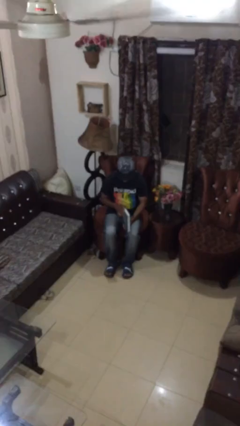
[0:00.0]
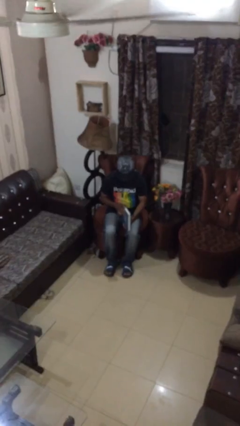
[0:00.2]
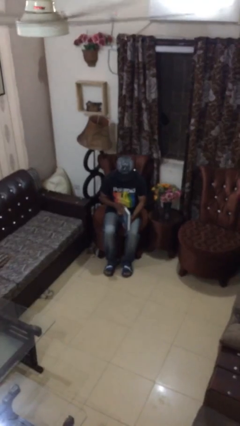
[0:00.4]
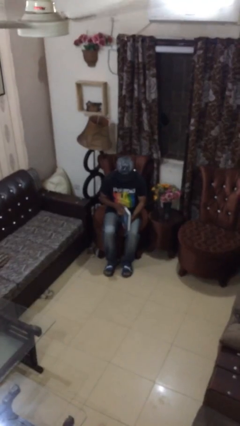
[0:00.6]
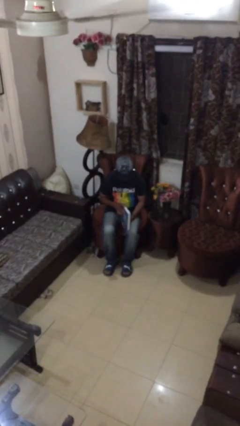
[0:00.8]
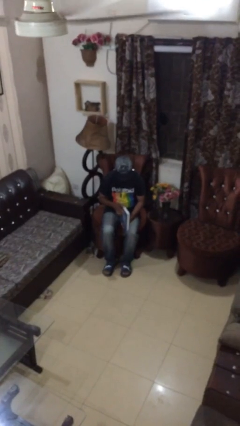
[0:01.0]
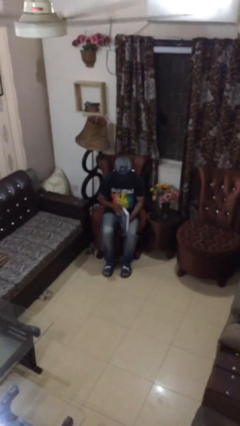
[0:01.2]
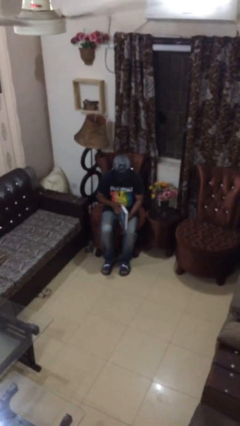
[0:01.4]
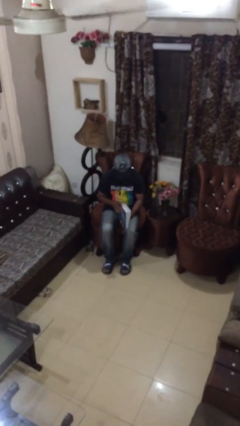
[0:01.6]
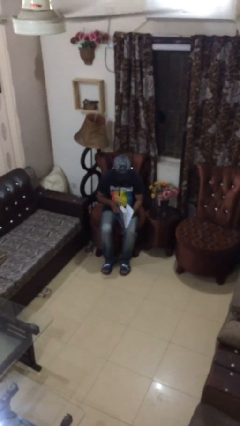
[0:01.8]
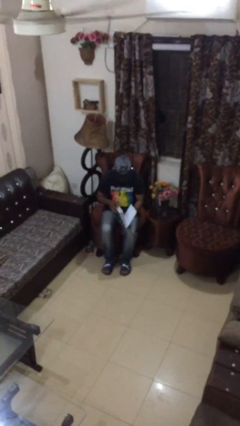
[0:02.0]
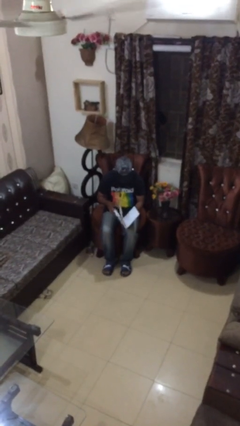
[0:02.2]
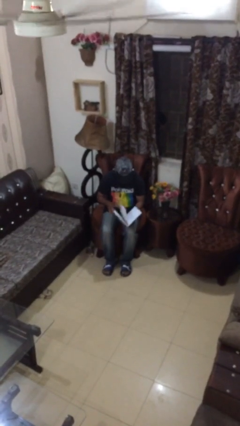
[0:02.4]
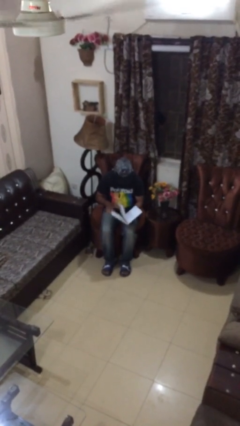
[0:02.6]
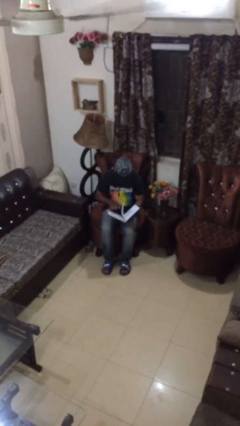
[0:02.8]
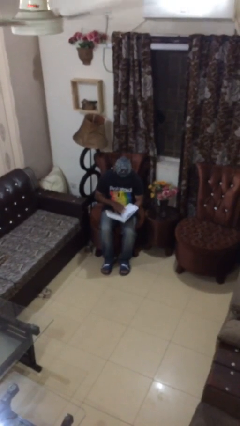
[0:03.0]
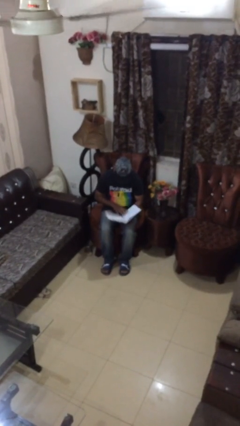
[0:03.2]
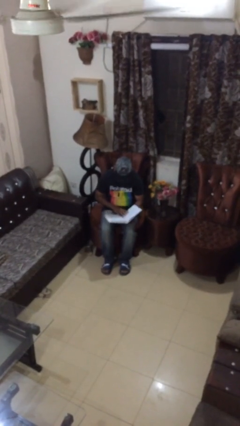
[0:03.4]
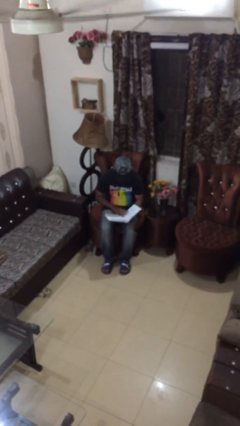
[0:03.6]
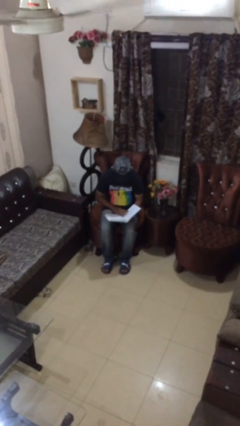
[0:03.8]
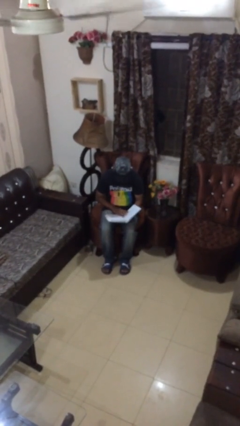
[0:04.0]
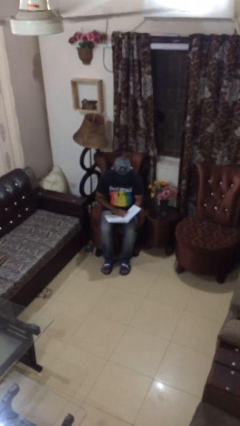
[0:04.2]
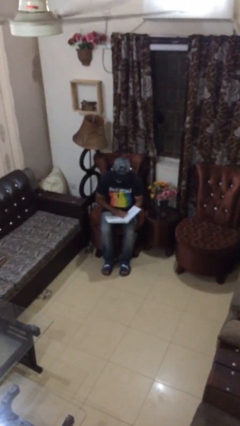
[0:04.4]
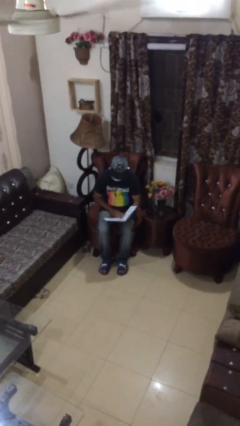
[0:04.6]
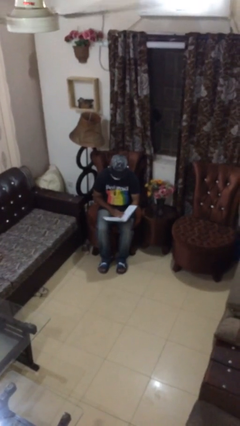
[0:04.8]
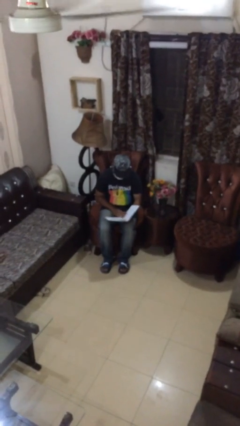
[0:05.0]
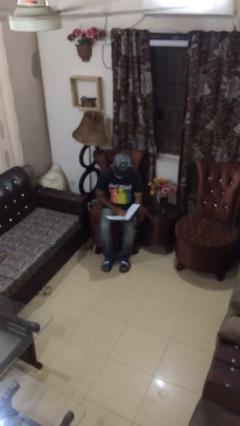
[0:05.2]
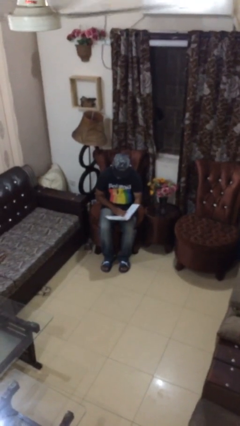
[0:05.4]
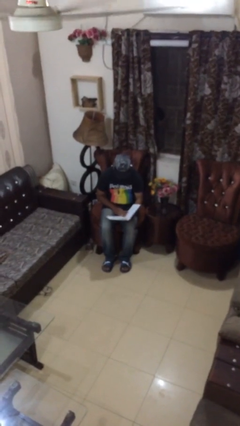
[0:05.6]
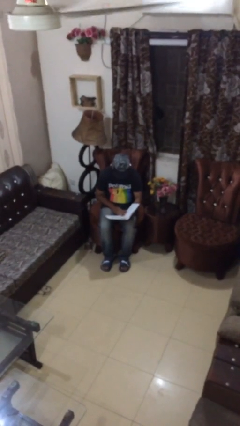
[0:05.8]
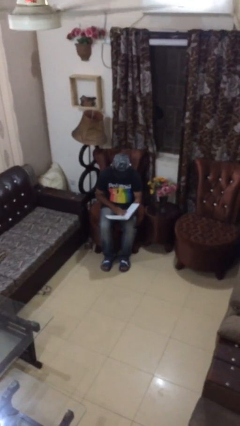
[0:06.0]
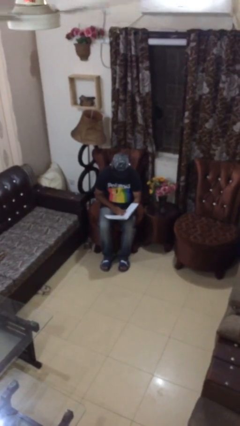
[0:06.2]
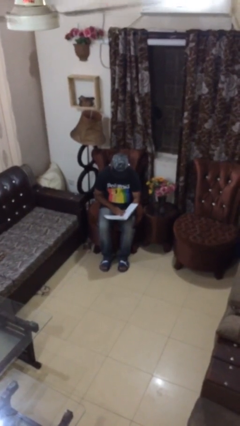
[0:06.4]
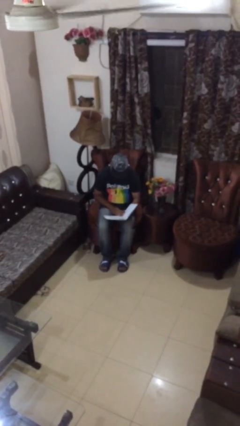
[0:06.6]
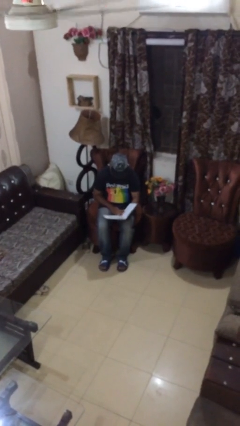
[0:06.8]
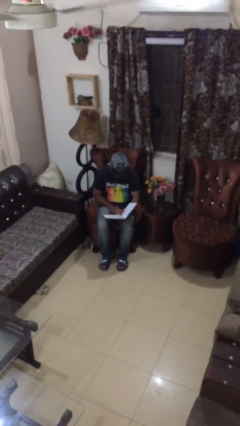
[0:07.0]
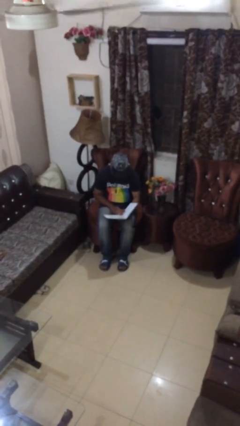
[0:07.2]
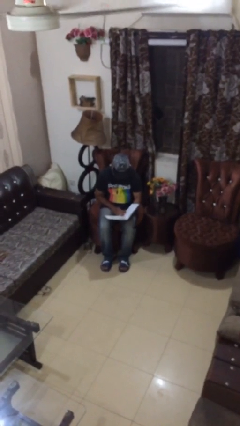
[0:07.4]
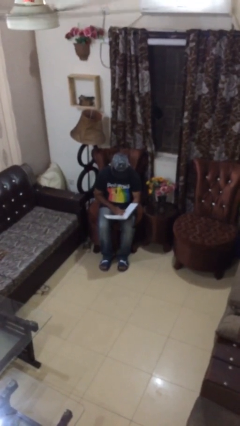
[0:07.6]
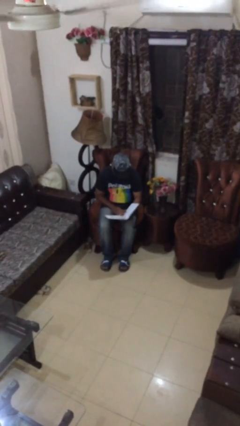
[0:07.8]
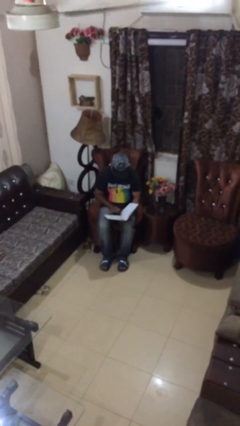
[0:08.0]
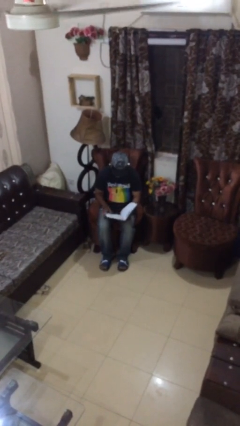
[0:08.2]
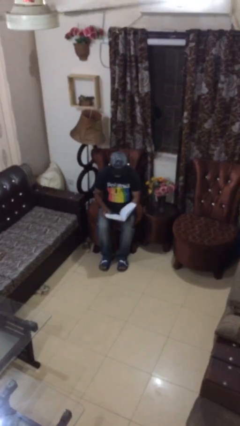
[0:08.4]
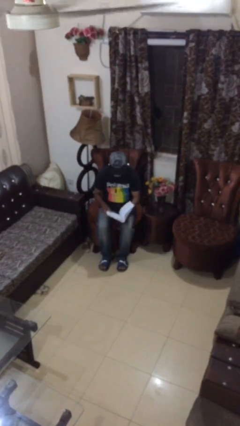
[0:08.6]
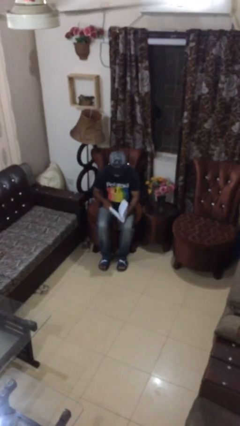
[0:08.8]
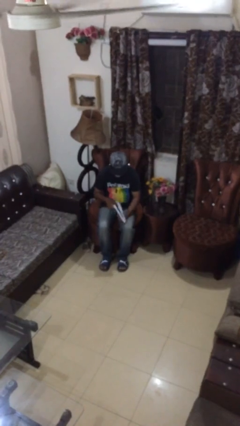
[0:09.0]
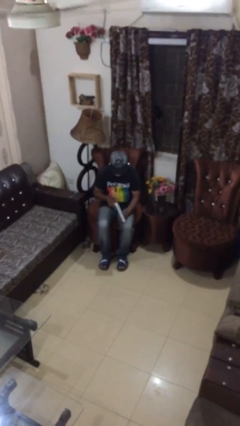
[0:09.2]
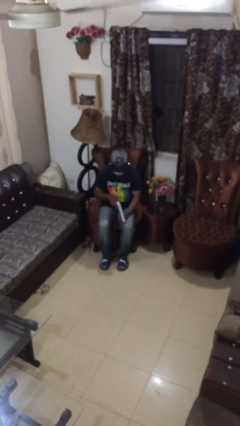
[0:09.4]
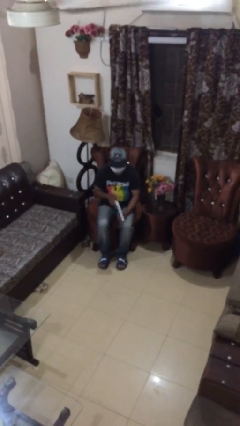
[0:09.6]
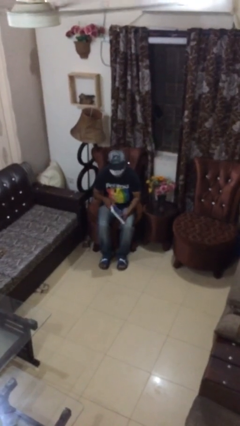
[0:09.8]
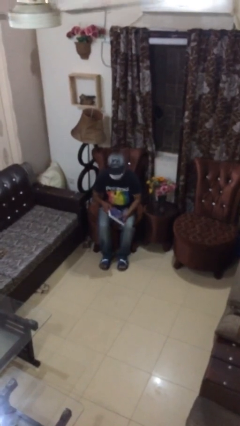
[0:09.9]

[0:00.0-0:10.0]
person reads document

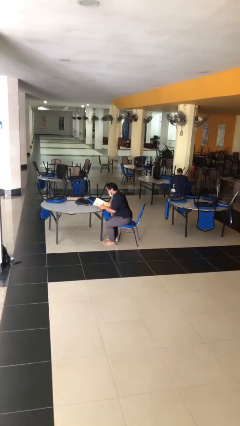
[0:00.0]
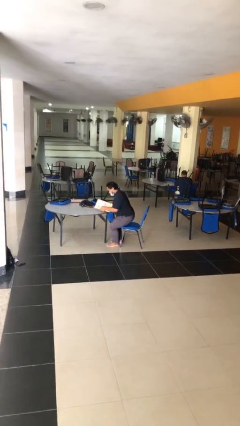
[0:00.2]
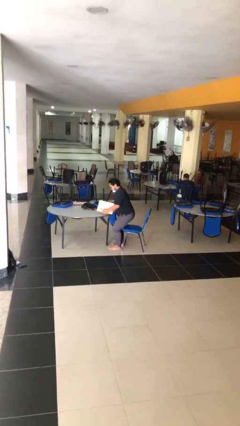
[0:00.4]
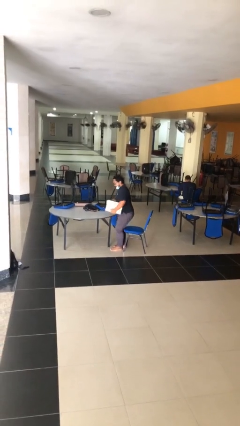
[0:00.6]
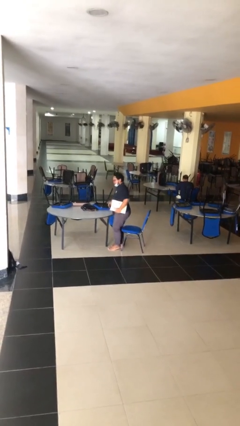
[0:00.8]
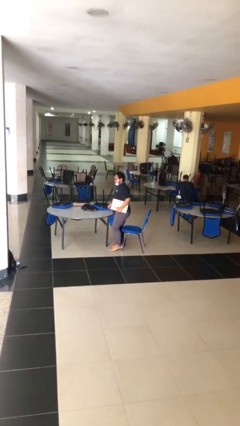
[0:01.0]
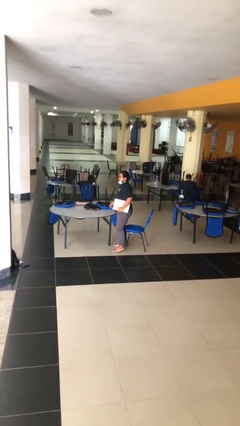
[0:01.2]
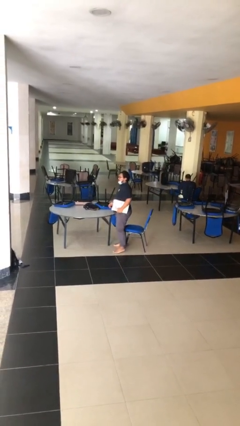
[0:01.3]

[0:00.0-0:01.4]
person stands up

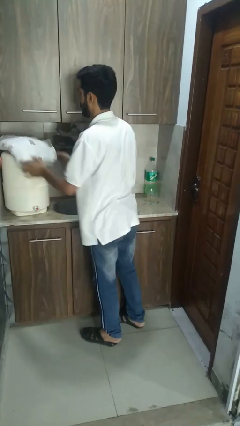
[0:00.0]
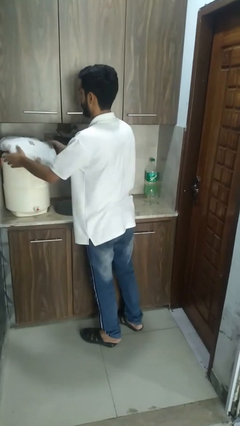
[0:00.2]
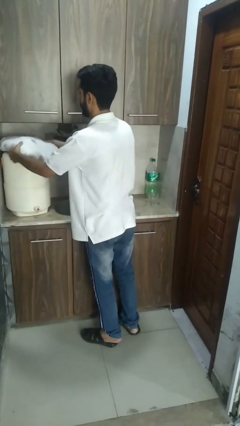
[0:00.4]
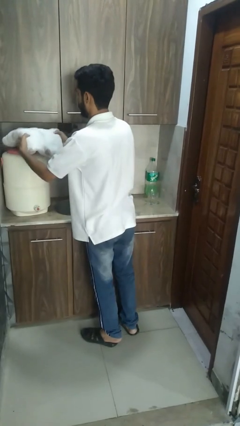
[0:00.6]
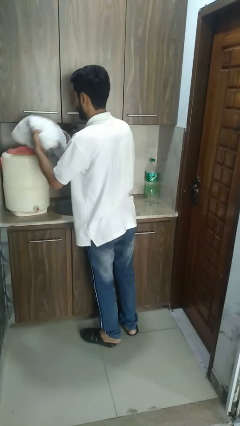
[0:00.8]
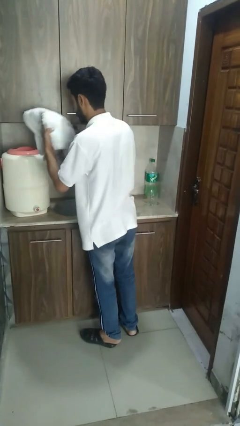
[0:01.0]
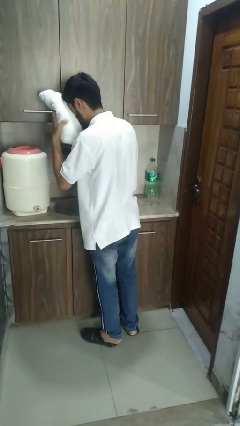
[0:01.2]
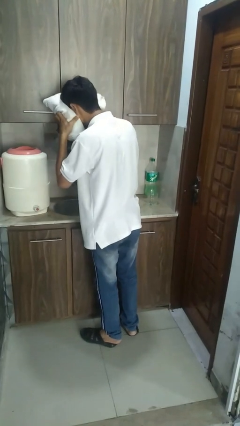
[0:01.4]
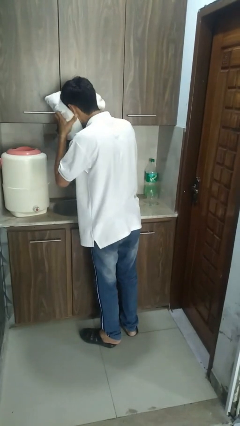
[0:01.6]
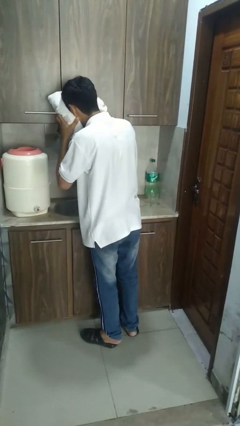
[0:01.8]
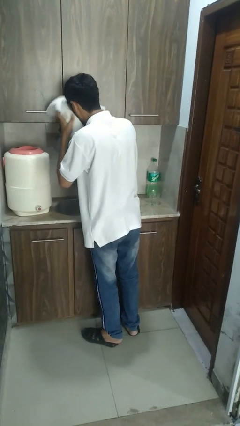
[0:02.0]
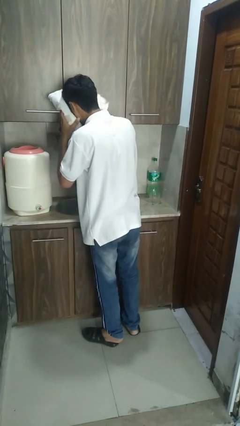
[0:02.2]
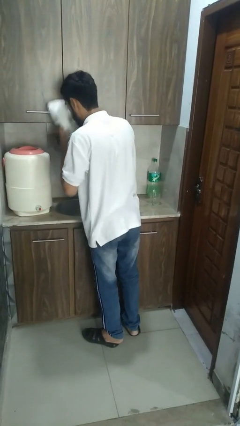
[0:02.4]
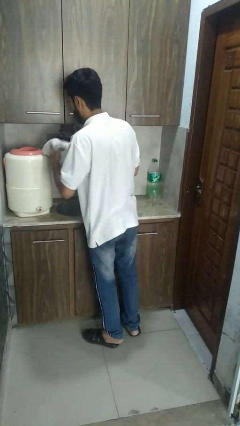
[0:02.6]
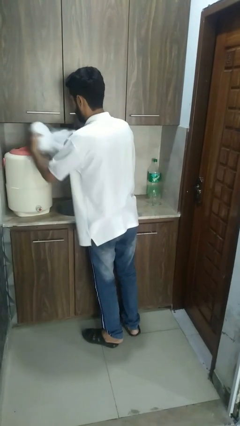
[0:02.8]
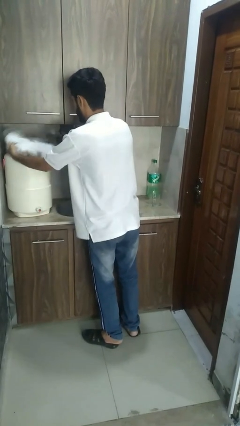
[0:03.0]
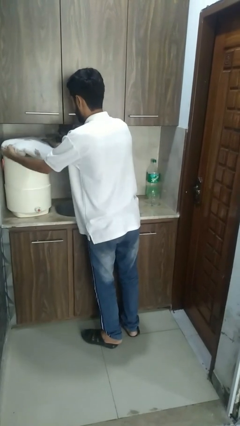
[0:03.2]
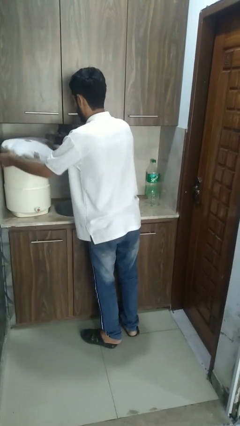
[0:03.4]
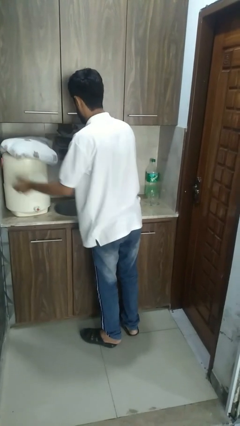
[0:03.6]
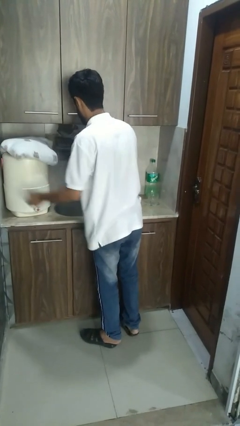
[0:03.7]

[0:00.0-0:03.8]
person dries face with towel

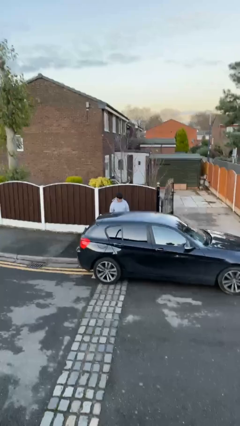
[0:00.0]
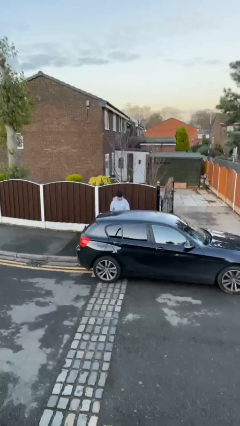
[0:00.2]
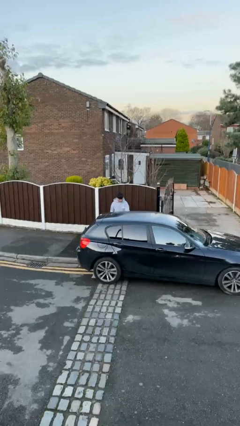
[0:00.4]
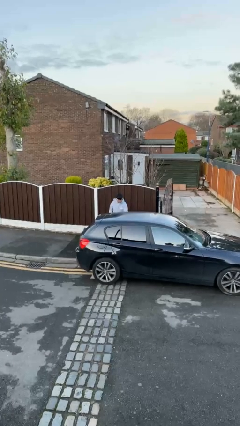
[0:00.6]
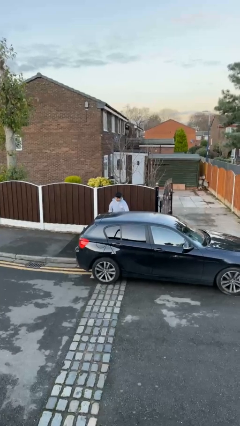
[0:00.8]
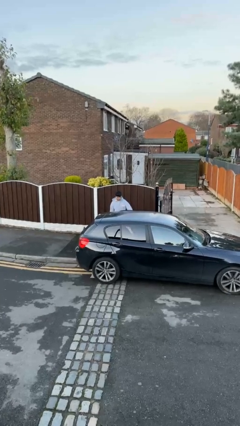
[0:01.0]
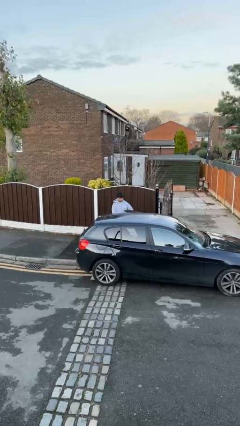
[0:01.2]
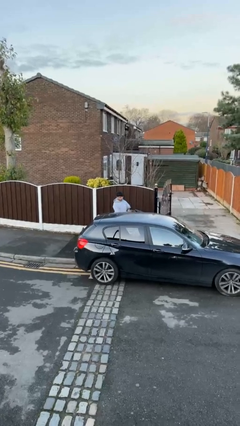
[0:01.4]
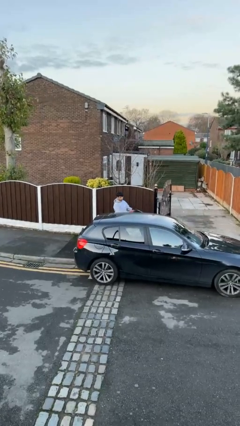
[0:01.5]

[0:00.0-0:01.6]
person opens car door

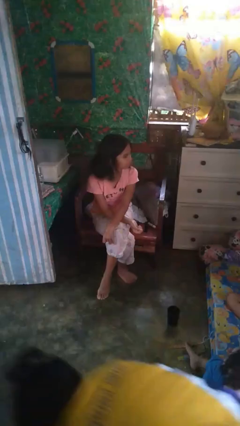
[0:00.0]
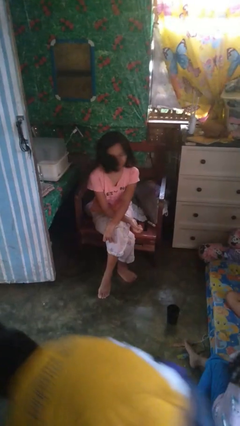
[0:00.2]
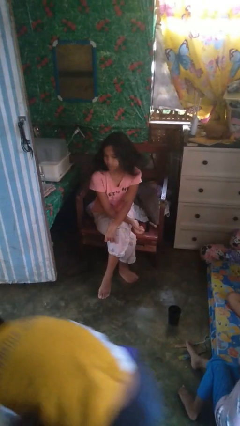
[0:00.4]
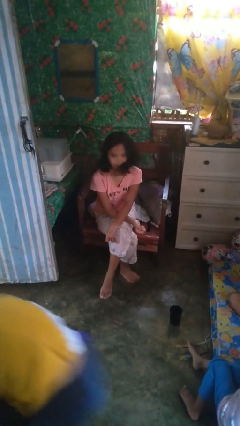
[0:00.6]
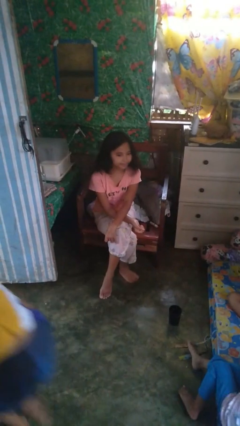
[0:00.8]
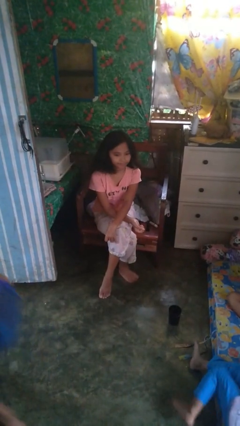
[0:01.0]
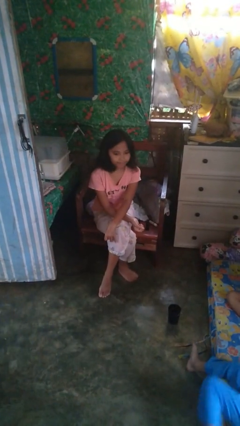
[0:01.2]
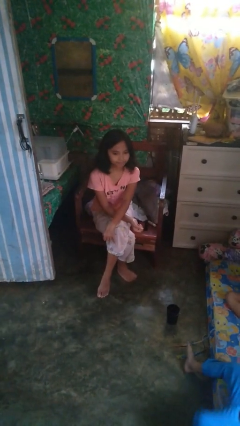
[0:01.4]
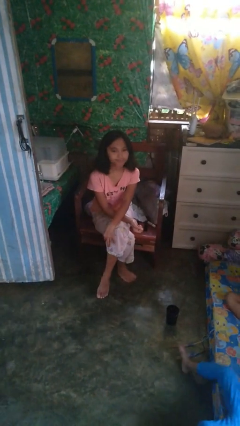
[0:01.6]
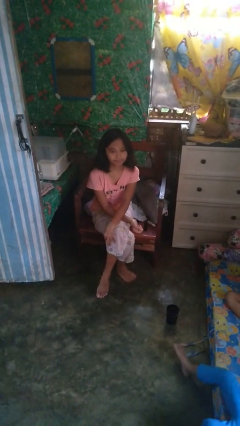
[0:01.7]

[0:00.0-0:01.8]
person shakes head
